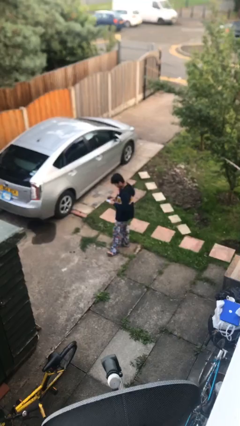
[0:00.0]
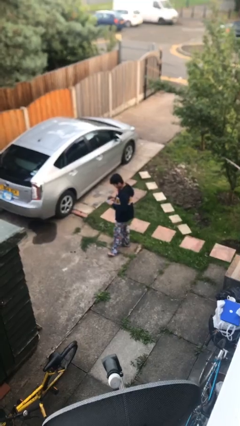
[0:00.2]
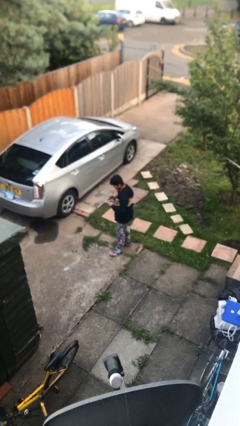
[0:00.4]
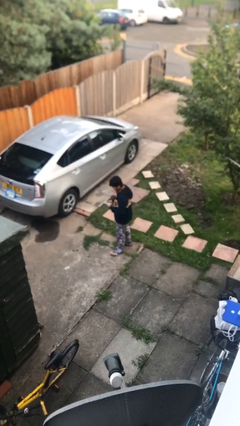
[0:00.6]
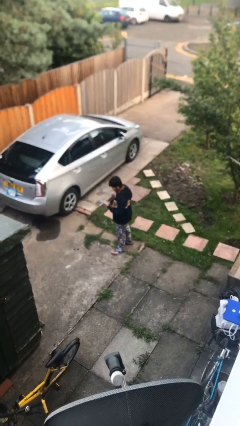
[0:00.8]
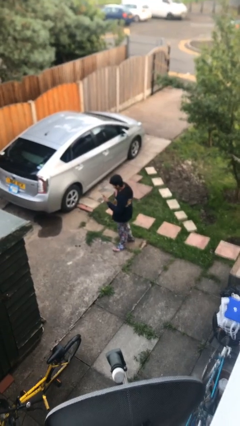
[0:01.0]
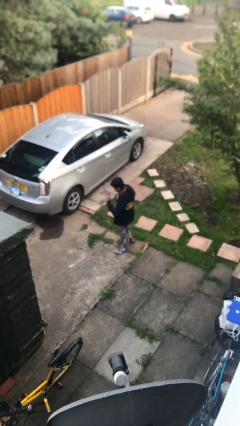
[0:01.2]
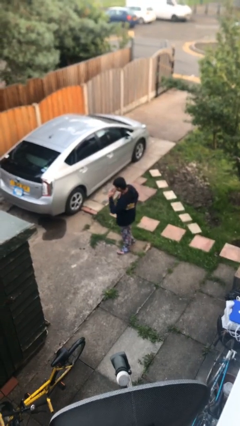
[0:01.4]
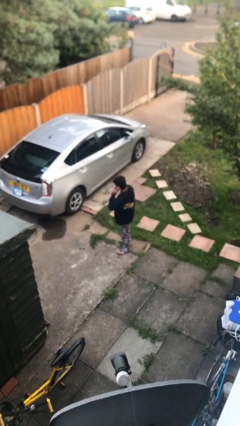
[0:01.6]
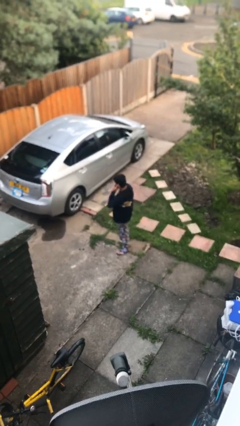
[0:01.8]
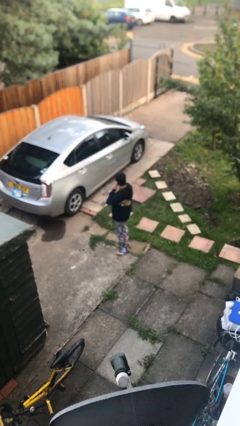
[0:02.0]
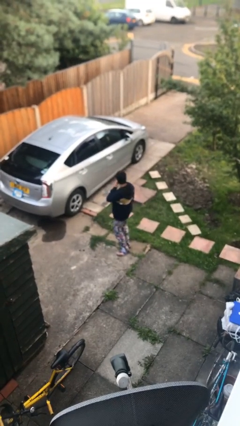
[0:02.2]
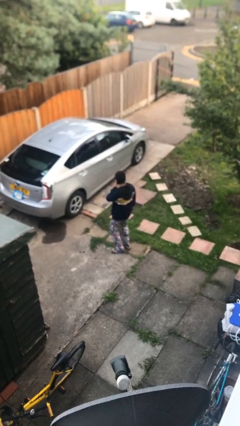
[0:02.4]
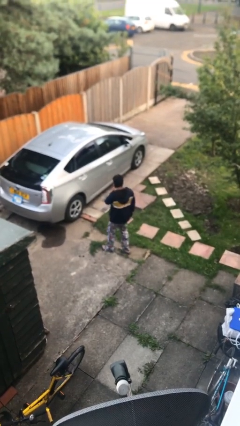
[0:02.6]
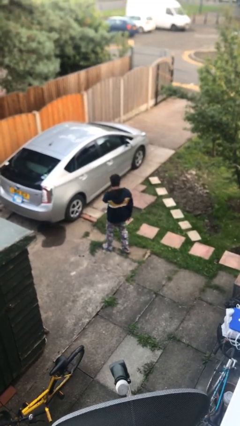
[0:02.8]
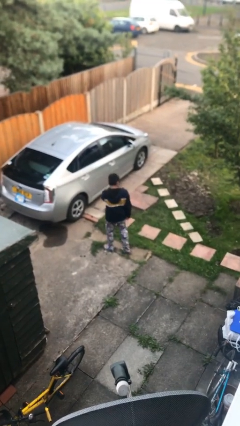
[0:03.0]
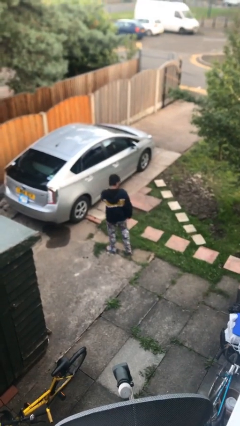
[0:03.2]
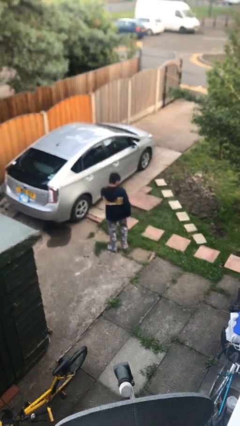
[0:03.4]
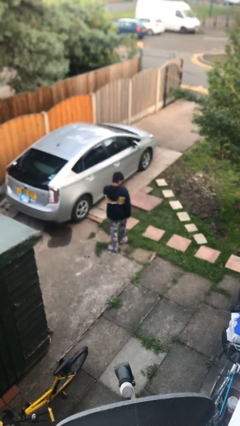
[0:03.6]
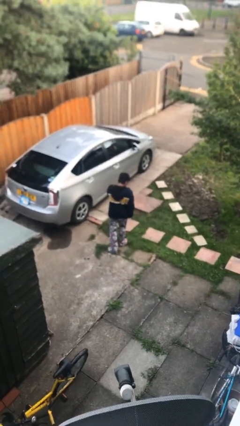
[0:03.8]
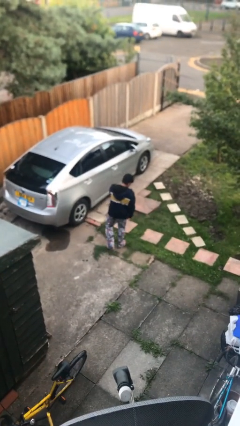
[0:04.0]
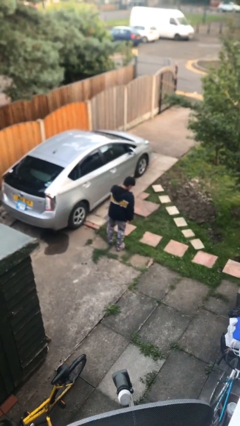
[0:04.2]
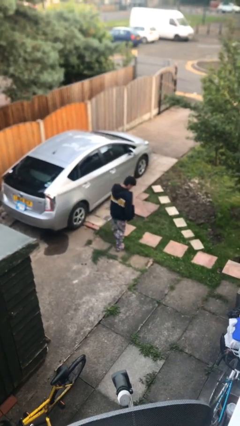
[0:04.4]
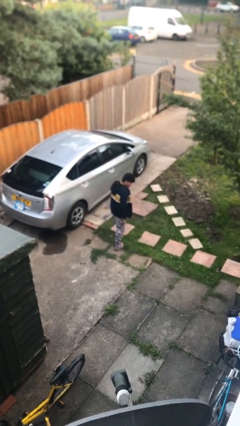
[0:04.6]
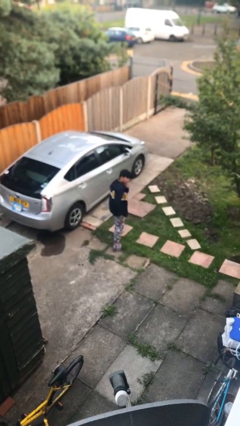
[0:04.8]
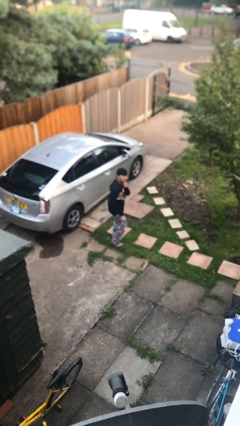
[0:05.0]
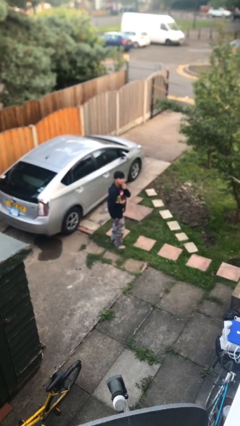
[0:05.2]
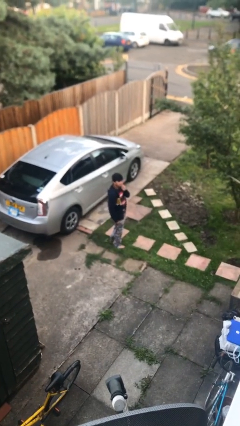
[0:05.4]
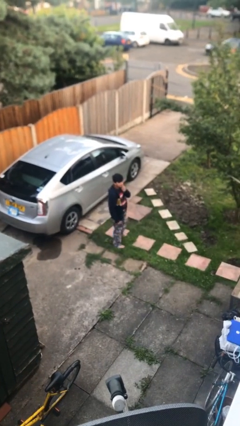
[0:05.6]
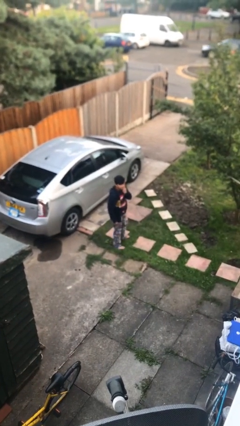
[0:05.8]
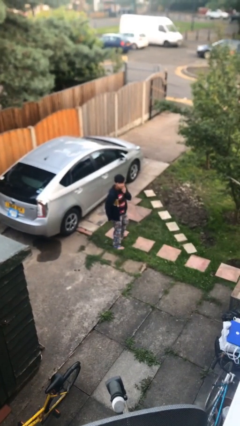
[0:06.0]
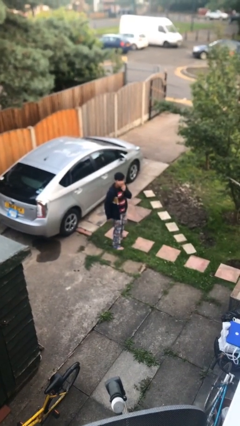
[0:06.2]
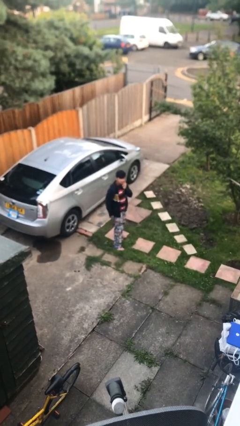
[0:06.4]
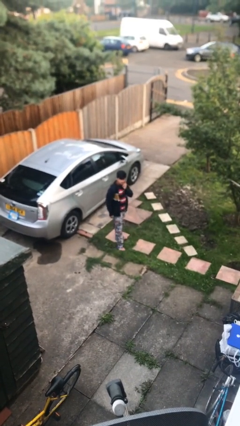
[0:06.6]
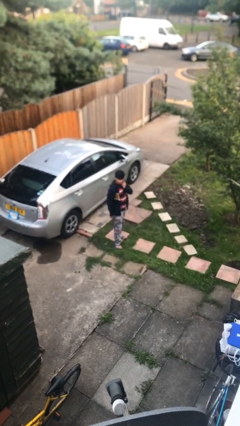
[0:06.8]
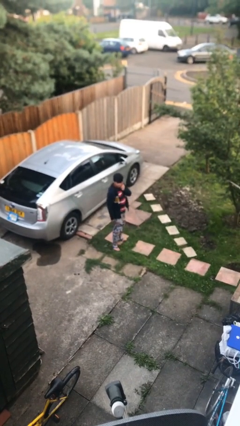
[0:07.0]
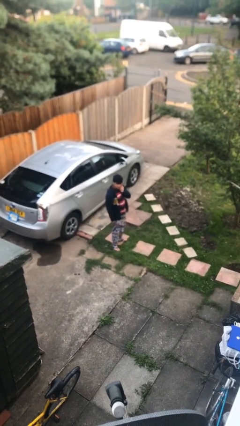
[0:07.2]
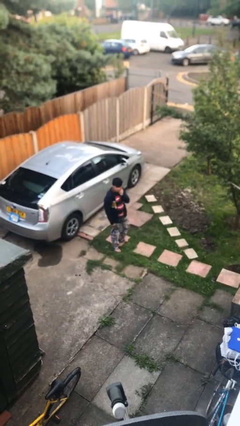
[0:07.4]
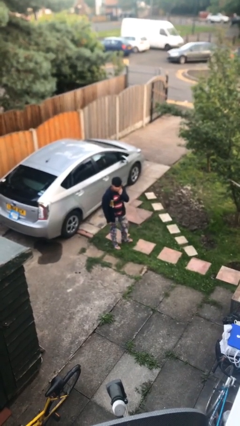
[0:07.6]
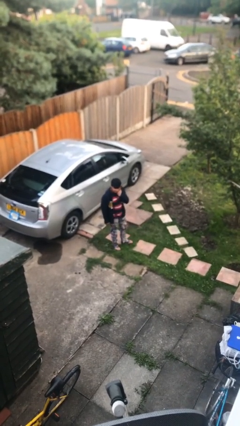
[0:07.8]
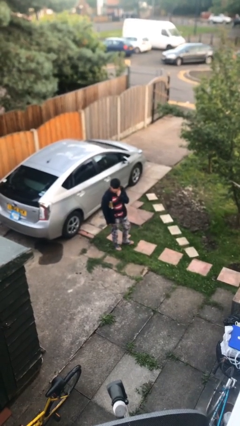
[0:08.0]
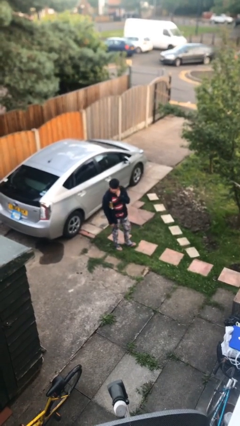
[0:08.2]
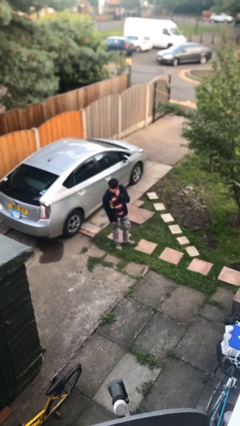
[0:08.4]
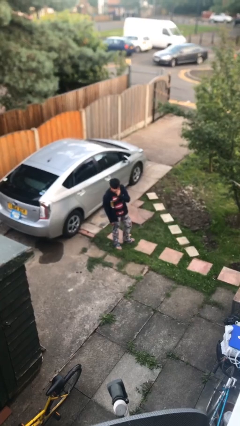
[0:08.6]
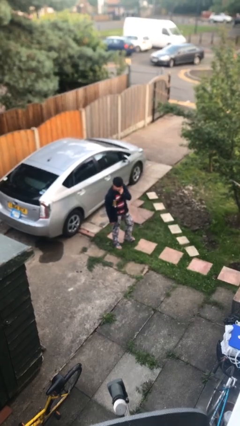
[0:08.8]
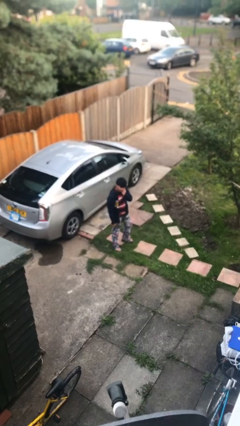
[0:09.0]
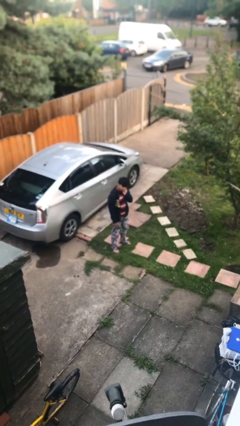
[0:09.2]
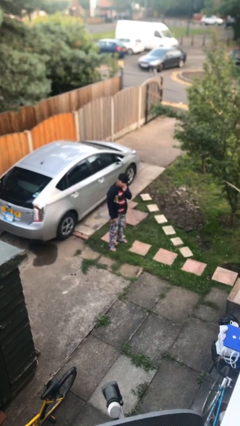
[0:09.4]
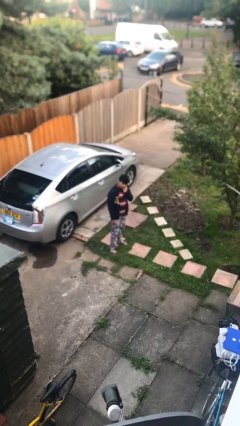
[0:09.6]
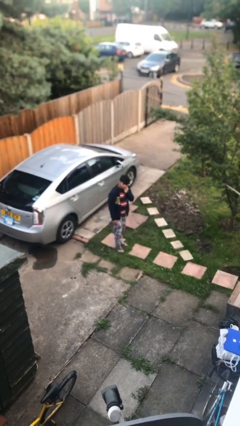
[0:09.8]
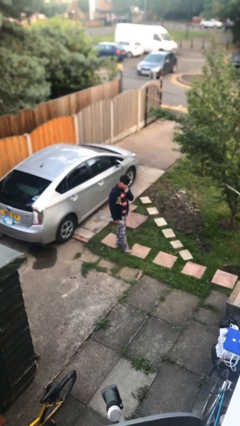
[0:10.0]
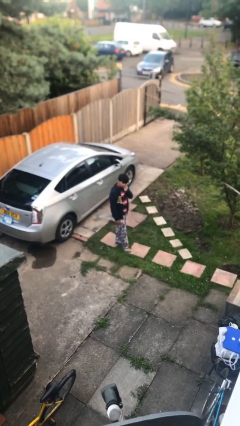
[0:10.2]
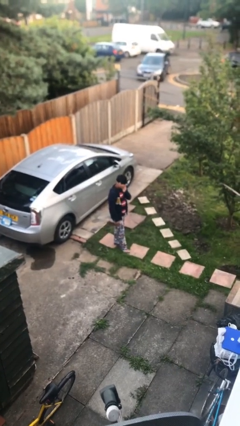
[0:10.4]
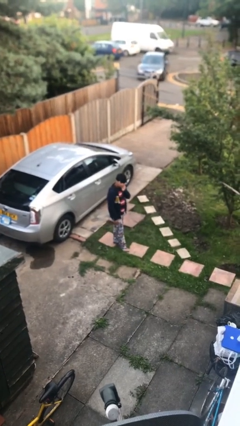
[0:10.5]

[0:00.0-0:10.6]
person talks on phone

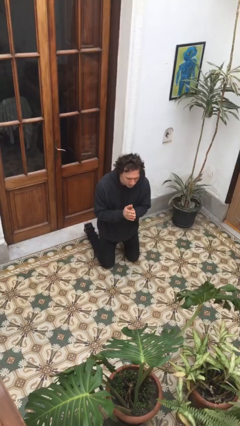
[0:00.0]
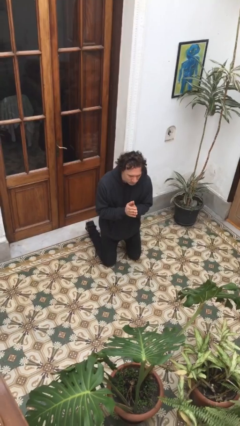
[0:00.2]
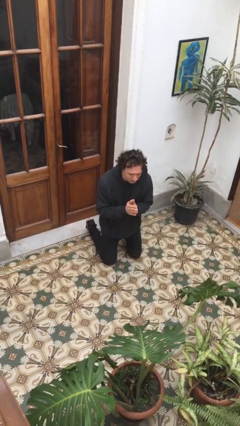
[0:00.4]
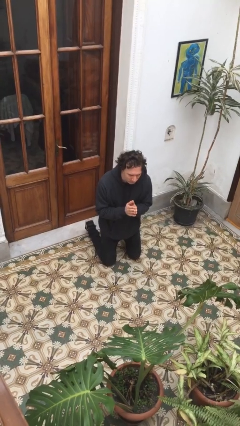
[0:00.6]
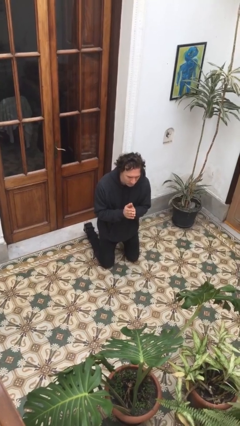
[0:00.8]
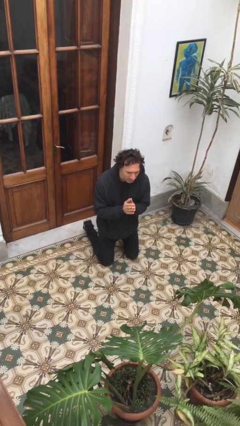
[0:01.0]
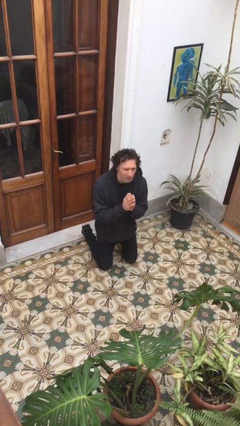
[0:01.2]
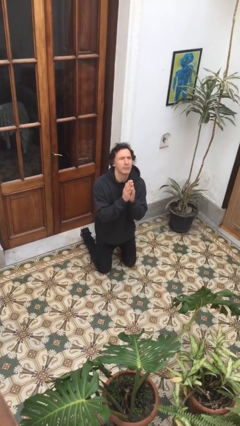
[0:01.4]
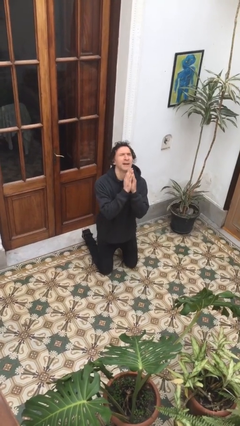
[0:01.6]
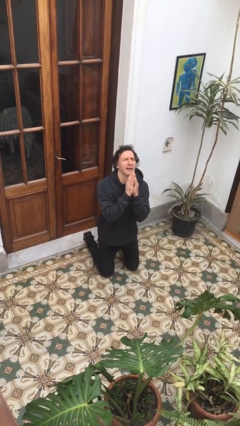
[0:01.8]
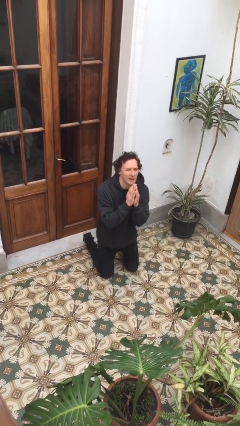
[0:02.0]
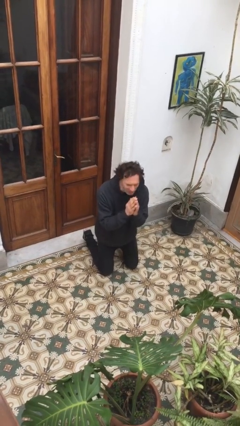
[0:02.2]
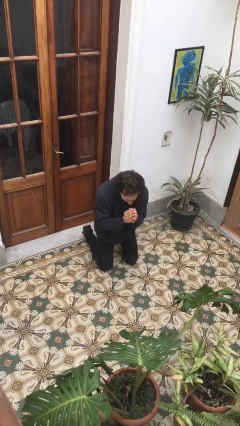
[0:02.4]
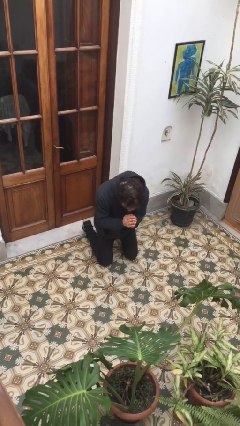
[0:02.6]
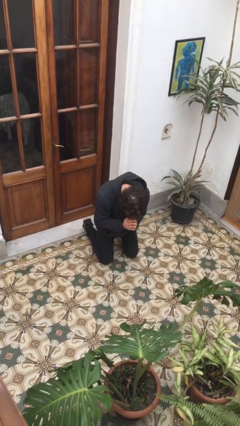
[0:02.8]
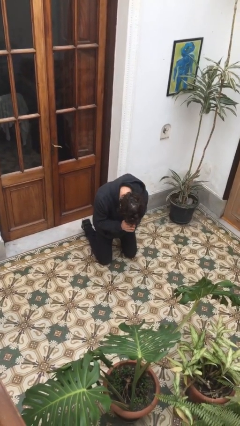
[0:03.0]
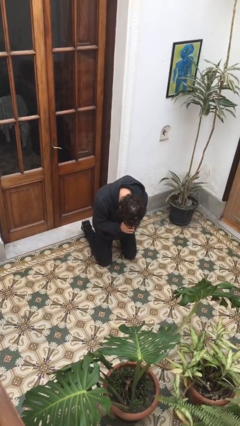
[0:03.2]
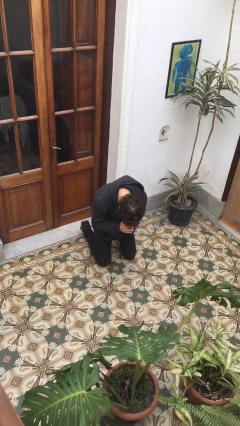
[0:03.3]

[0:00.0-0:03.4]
person prays

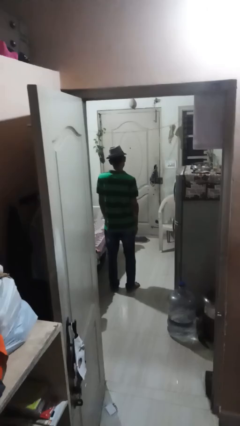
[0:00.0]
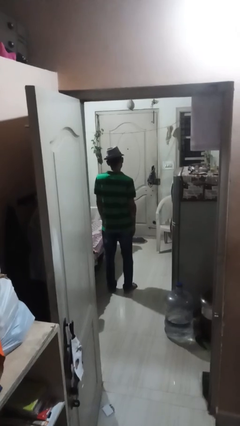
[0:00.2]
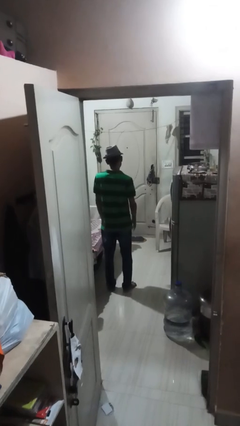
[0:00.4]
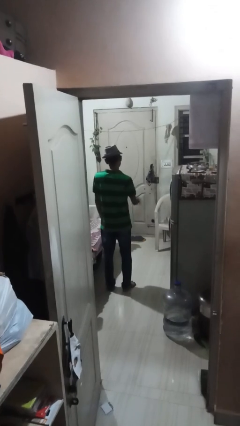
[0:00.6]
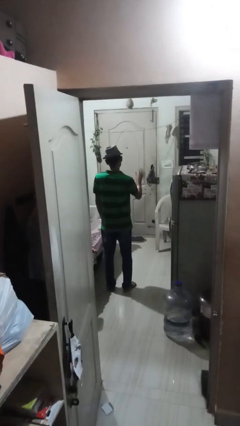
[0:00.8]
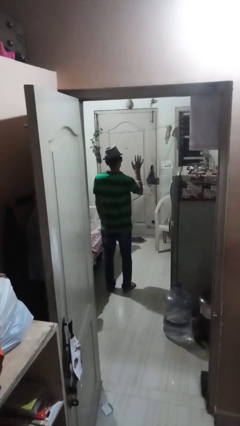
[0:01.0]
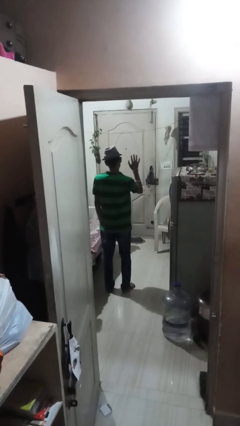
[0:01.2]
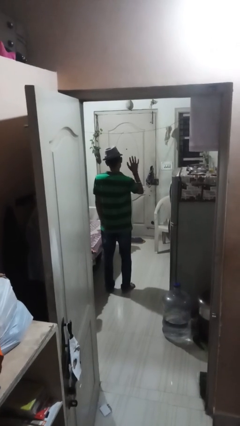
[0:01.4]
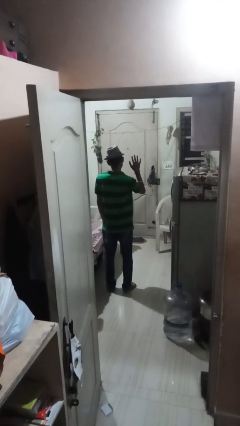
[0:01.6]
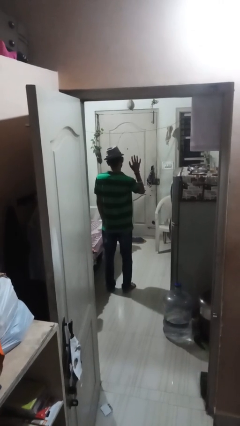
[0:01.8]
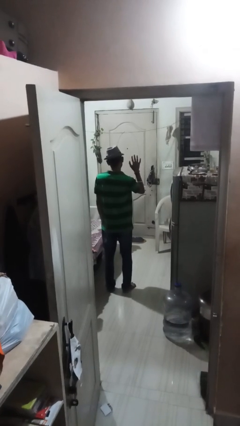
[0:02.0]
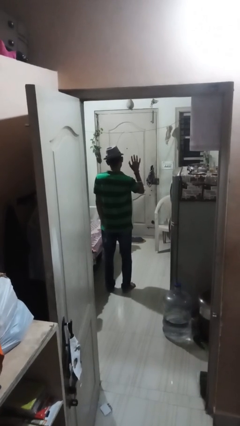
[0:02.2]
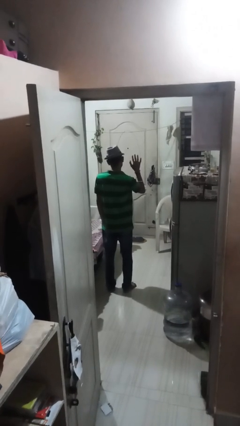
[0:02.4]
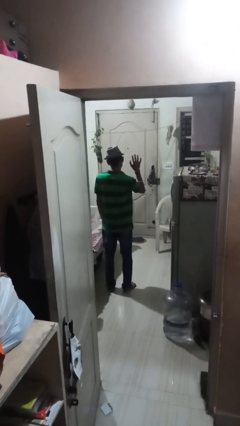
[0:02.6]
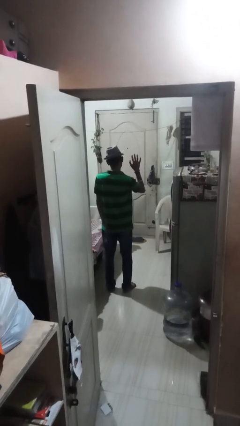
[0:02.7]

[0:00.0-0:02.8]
person gestures number five

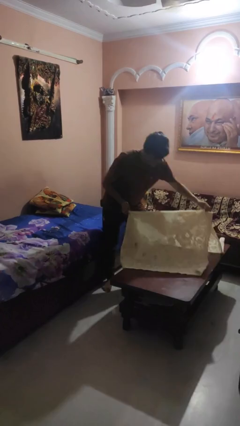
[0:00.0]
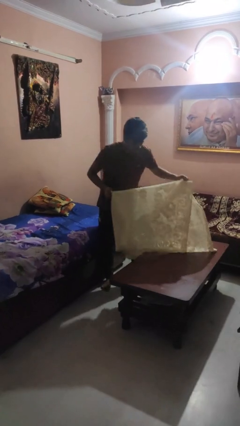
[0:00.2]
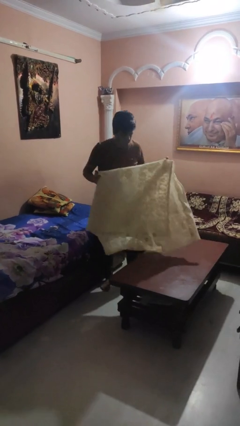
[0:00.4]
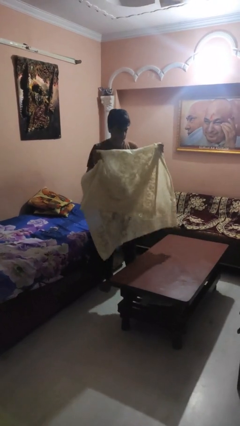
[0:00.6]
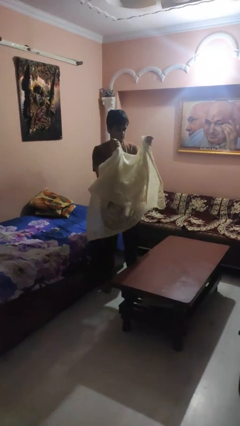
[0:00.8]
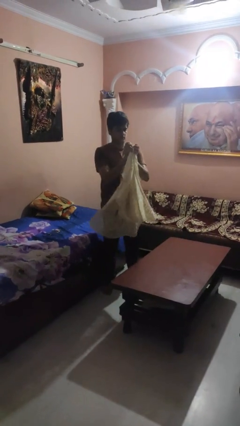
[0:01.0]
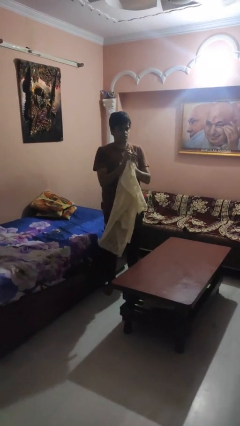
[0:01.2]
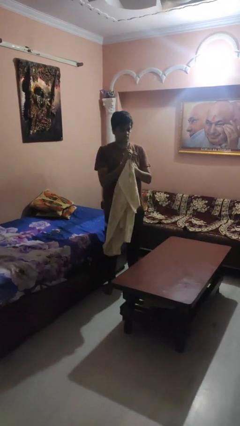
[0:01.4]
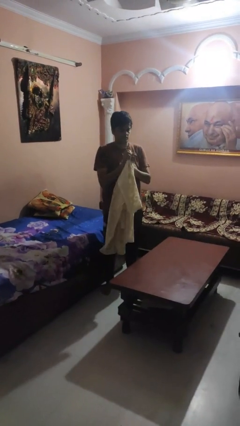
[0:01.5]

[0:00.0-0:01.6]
person folds tablecloth
